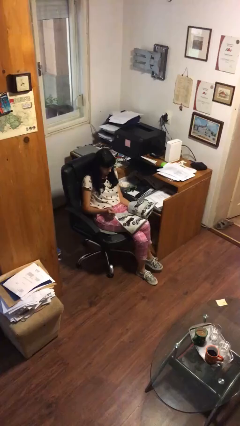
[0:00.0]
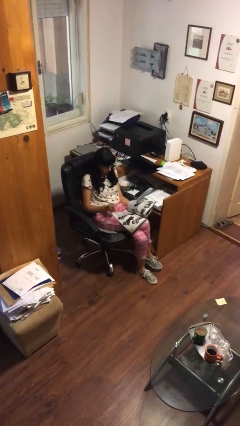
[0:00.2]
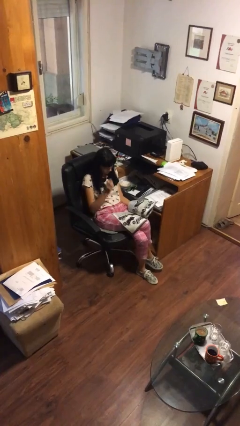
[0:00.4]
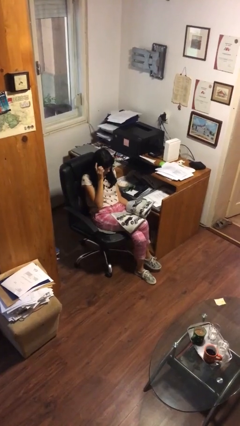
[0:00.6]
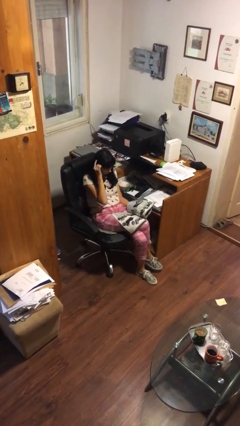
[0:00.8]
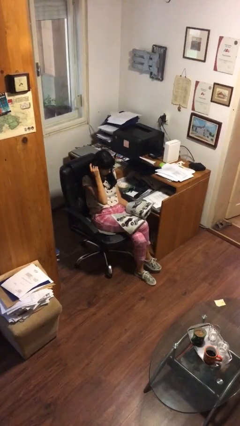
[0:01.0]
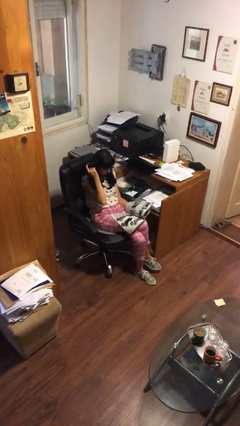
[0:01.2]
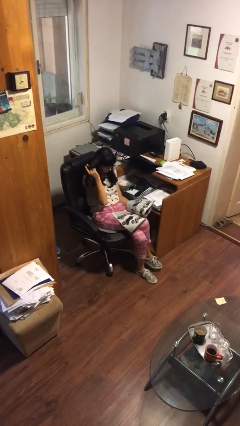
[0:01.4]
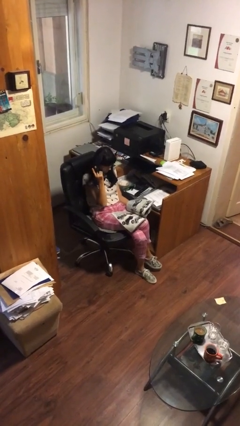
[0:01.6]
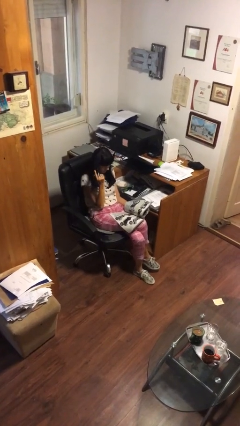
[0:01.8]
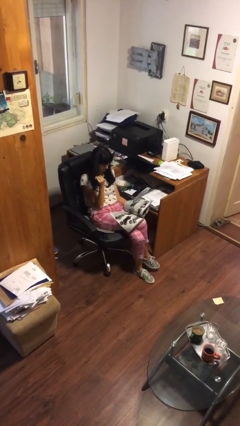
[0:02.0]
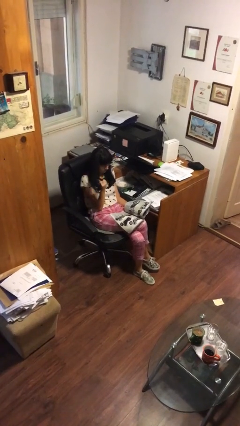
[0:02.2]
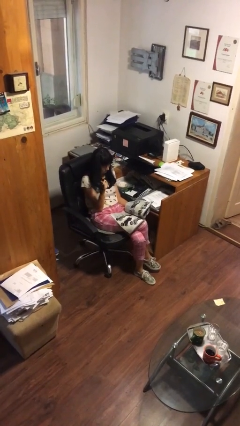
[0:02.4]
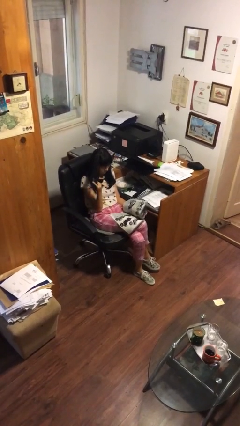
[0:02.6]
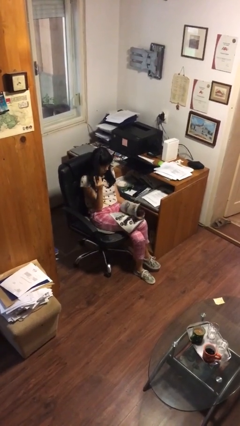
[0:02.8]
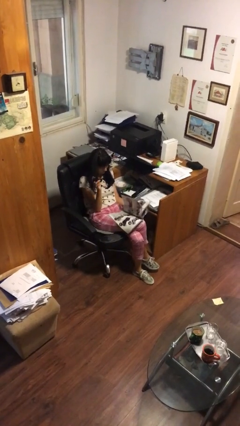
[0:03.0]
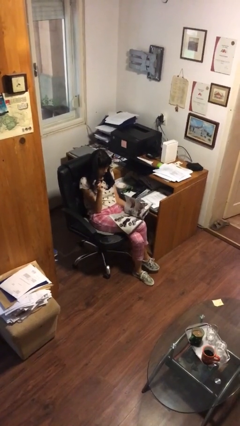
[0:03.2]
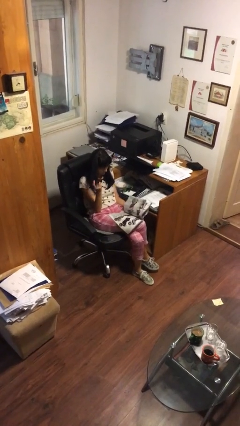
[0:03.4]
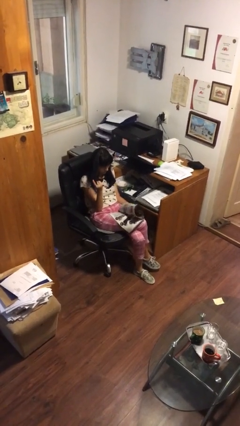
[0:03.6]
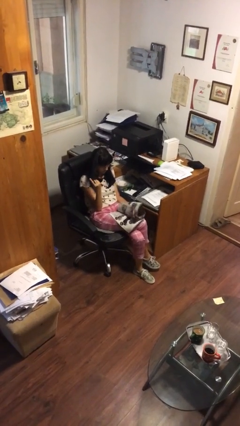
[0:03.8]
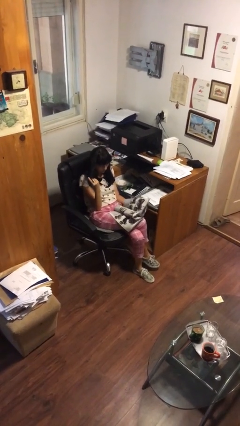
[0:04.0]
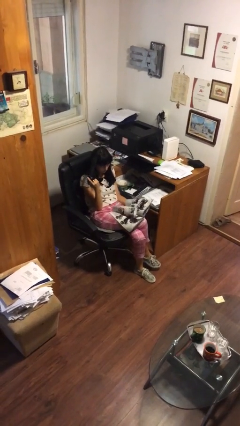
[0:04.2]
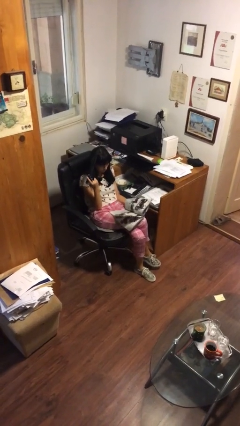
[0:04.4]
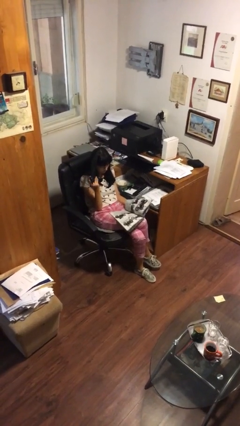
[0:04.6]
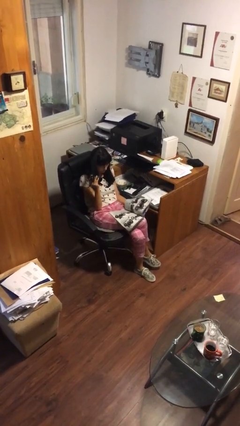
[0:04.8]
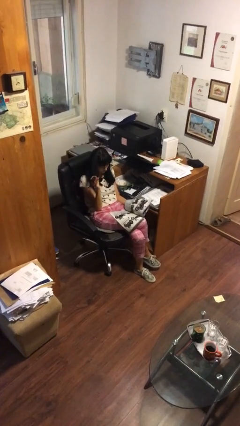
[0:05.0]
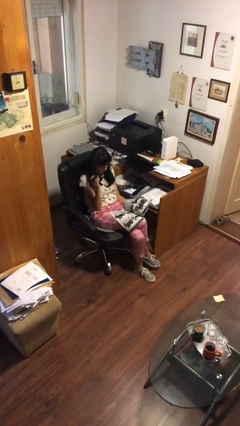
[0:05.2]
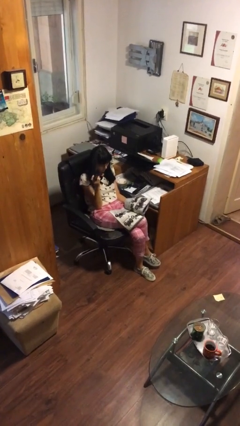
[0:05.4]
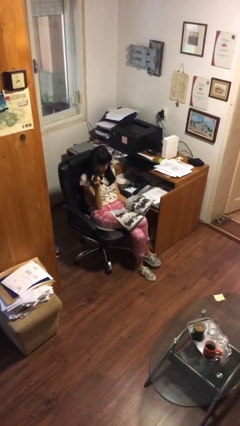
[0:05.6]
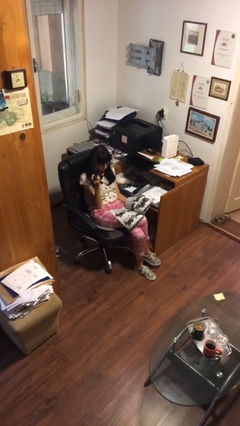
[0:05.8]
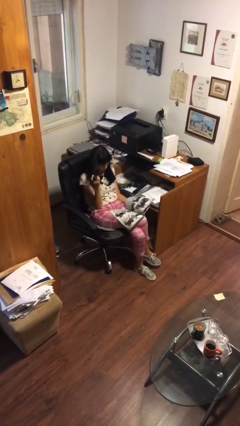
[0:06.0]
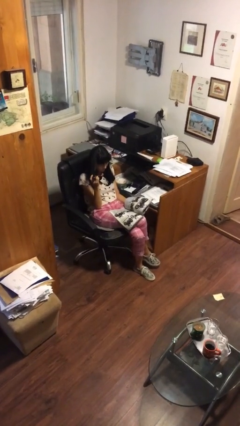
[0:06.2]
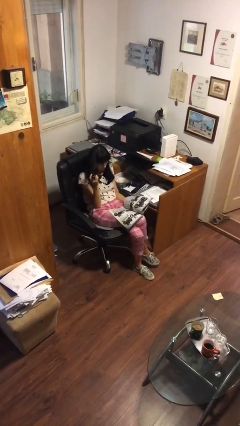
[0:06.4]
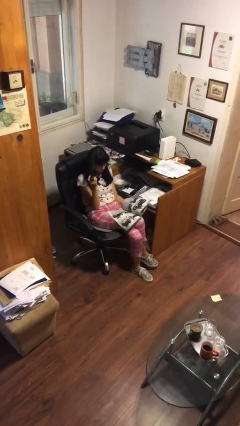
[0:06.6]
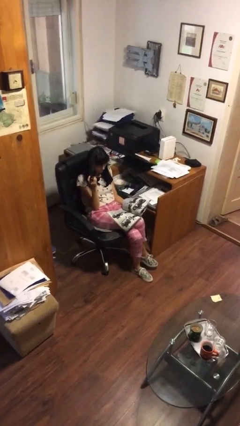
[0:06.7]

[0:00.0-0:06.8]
person reads document

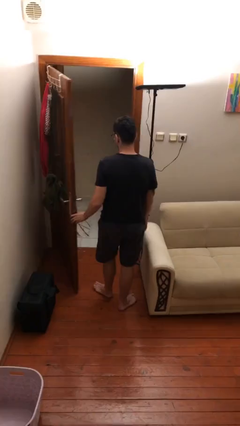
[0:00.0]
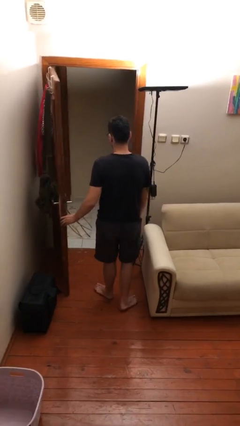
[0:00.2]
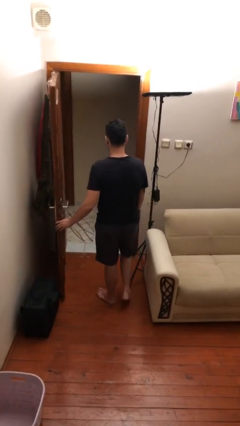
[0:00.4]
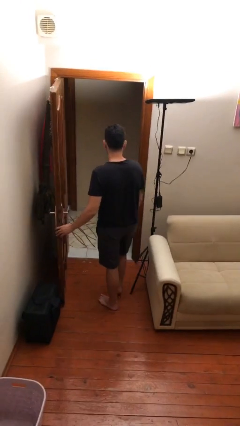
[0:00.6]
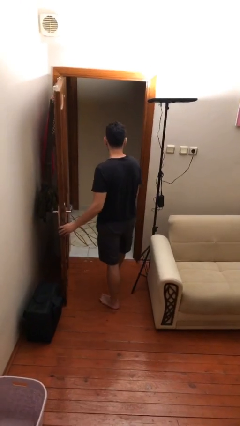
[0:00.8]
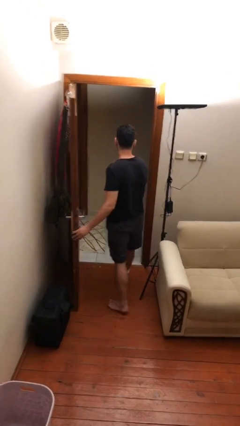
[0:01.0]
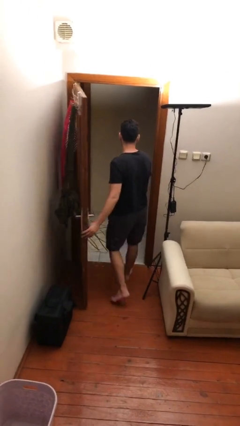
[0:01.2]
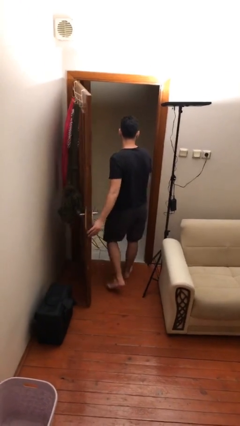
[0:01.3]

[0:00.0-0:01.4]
person exits scene through structure

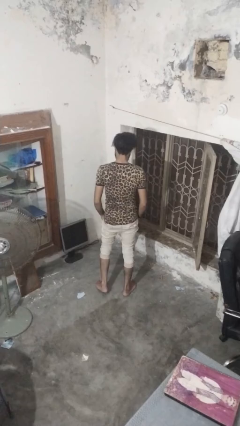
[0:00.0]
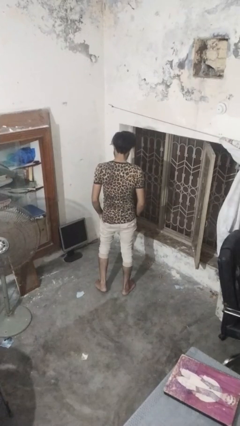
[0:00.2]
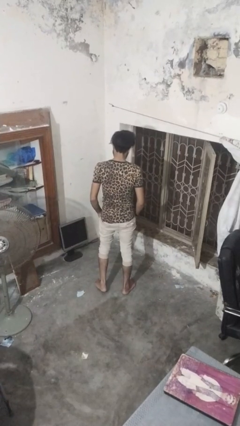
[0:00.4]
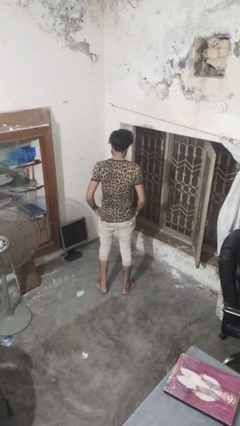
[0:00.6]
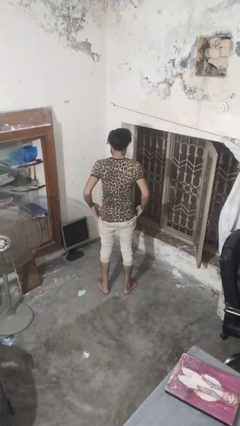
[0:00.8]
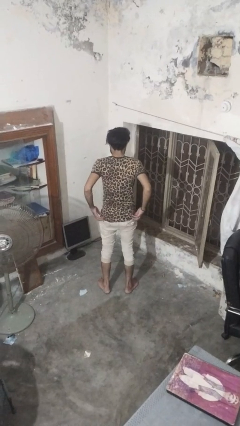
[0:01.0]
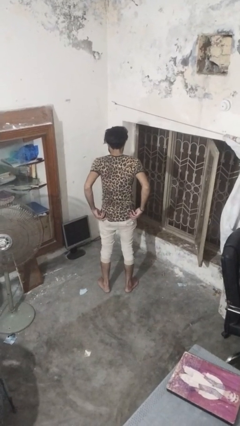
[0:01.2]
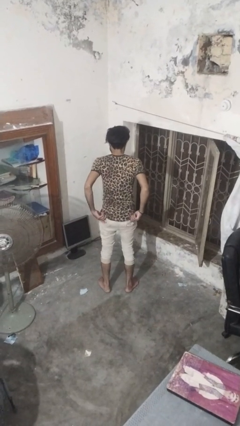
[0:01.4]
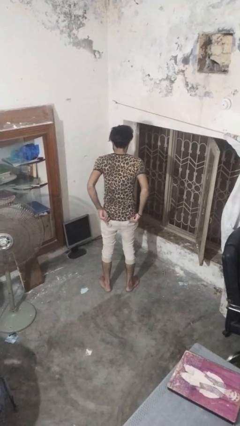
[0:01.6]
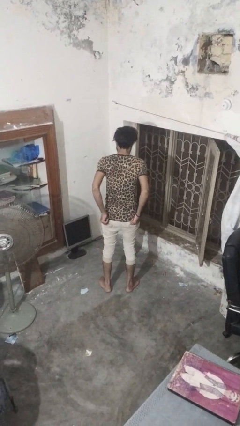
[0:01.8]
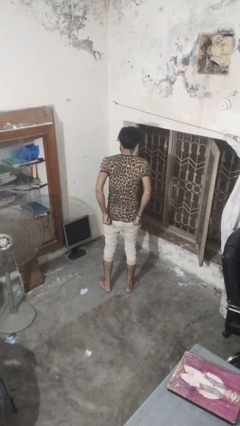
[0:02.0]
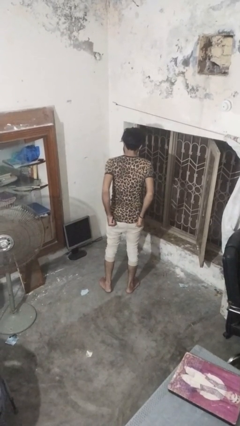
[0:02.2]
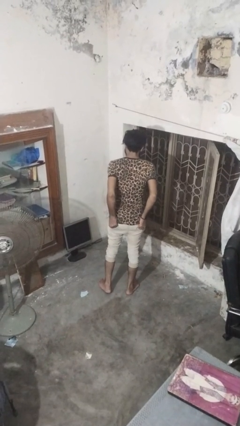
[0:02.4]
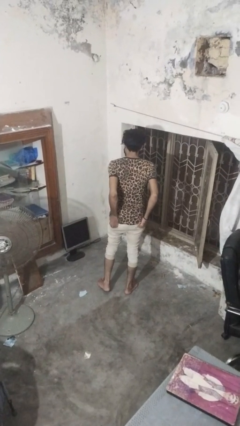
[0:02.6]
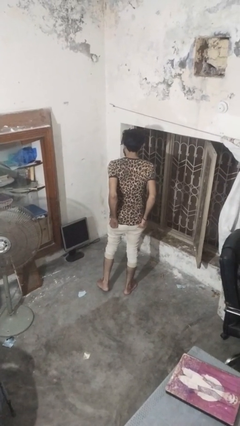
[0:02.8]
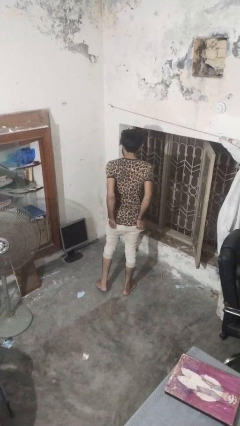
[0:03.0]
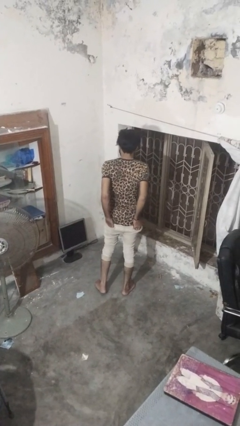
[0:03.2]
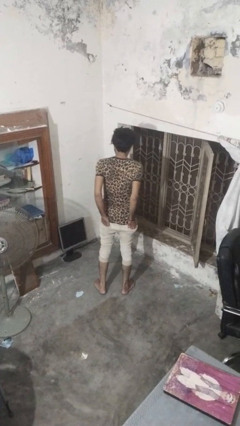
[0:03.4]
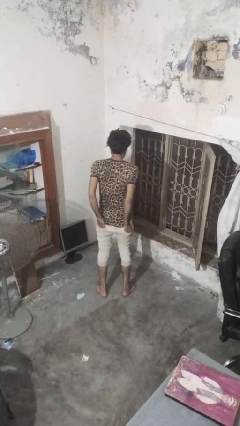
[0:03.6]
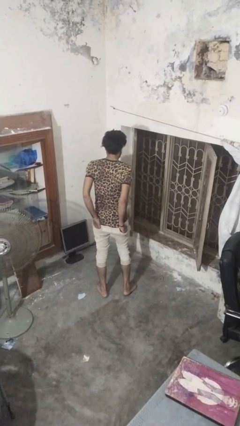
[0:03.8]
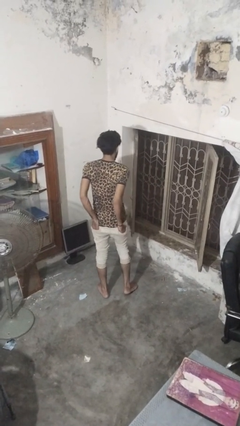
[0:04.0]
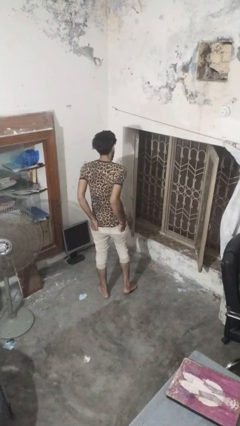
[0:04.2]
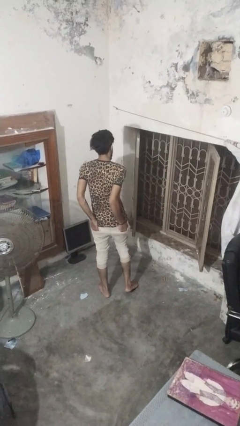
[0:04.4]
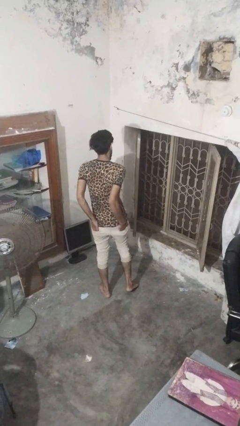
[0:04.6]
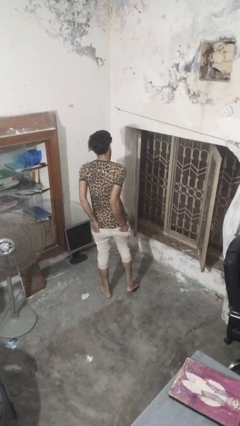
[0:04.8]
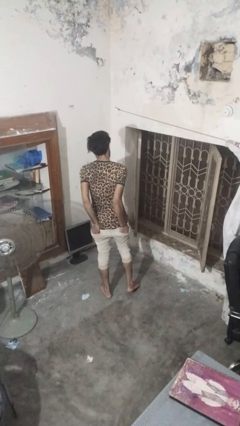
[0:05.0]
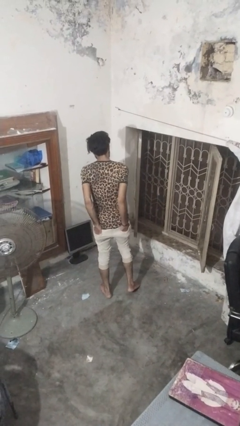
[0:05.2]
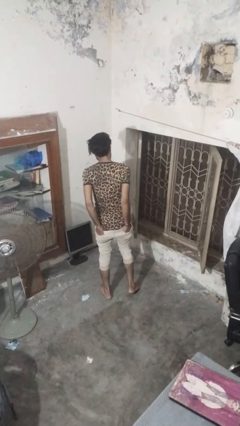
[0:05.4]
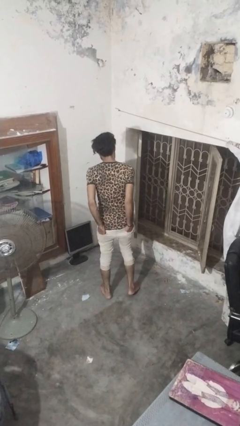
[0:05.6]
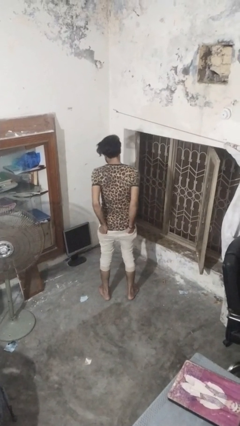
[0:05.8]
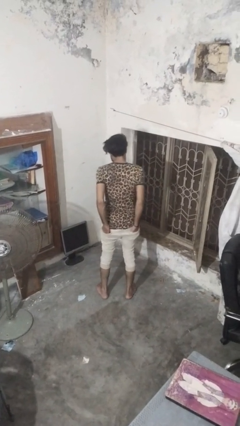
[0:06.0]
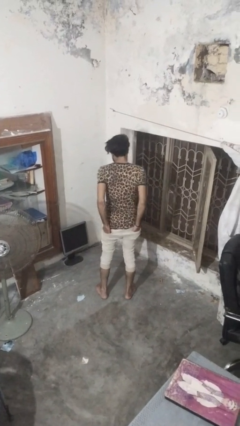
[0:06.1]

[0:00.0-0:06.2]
person puts hands in back pockets

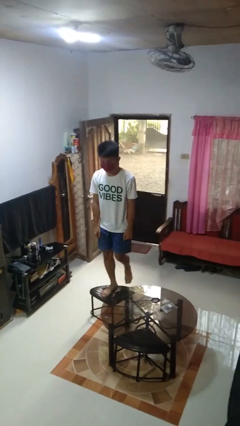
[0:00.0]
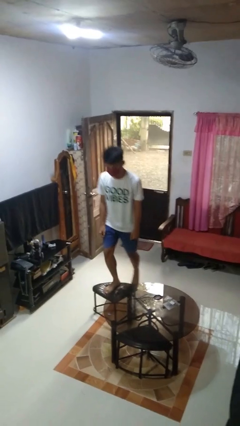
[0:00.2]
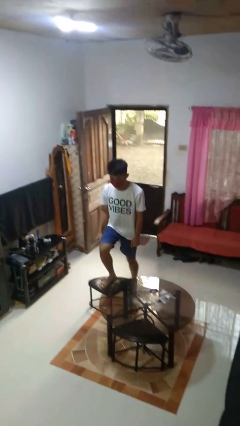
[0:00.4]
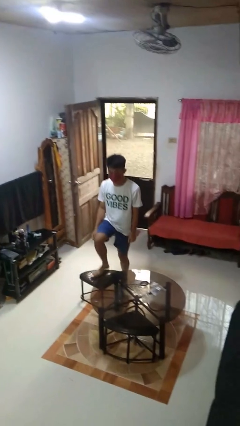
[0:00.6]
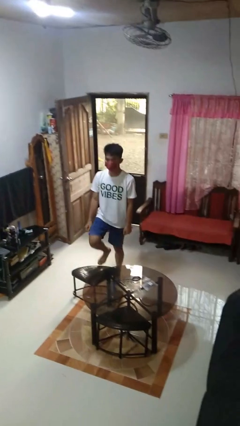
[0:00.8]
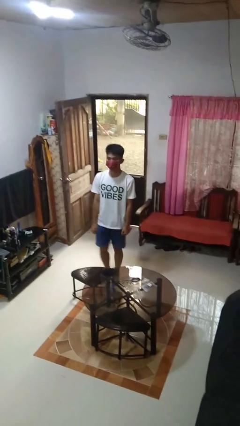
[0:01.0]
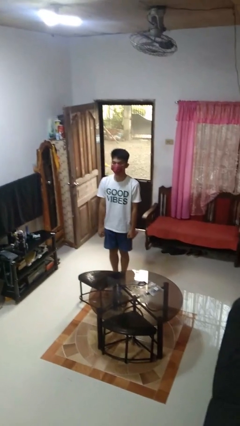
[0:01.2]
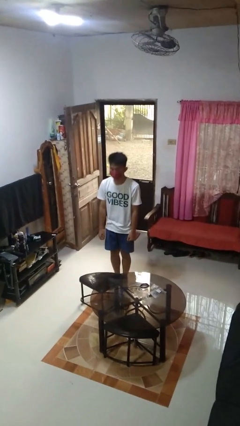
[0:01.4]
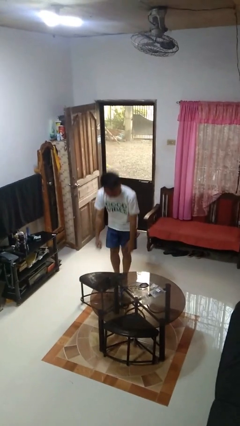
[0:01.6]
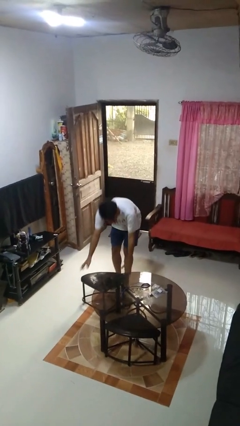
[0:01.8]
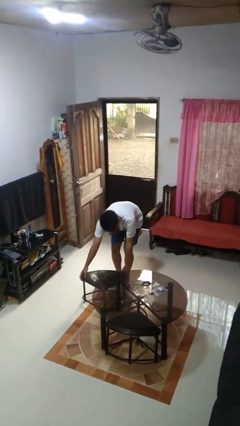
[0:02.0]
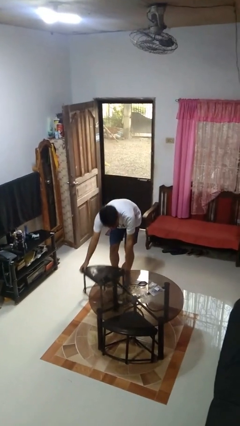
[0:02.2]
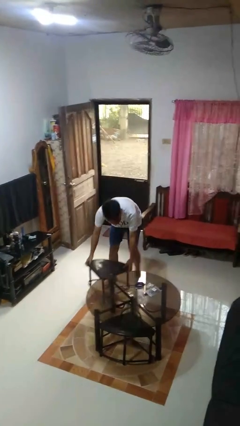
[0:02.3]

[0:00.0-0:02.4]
person climbs off chair

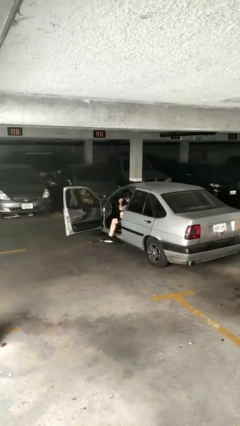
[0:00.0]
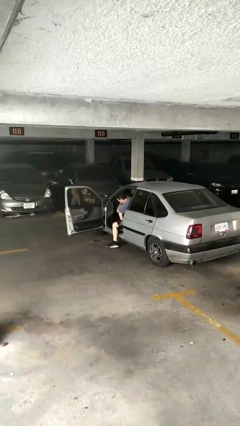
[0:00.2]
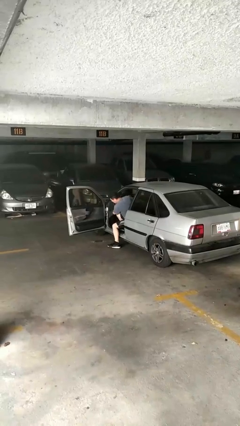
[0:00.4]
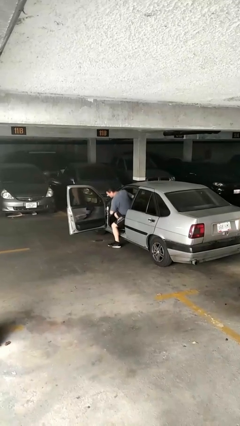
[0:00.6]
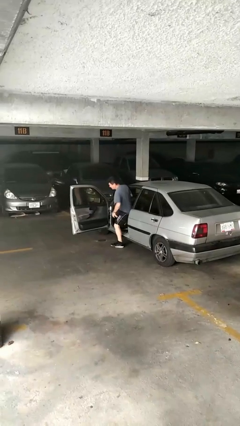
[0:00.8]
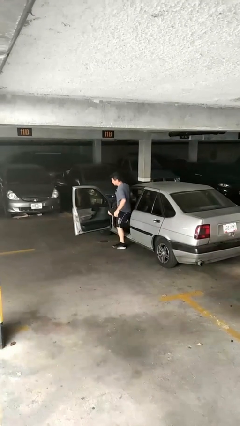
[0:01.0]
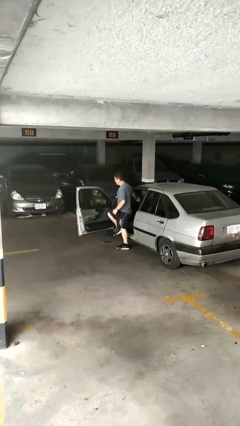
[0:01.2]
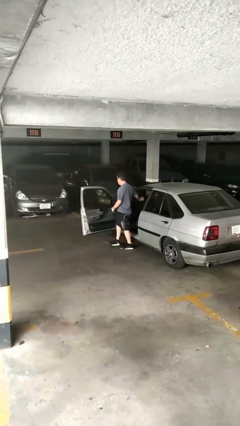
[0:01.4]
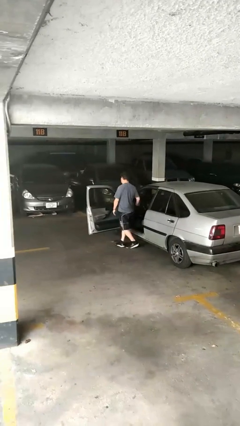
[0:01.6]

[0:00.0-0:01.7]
person exits car
